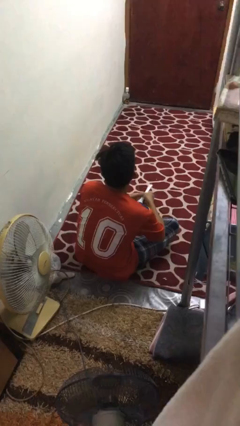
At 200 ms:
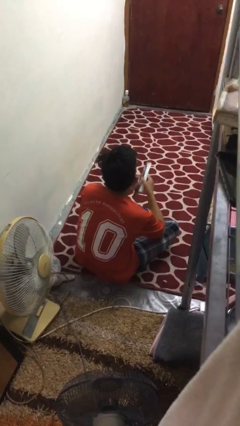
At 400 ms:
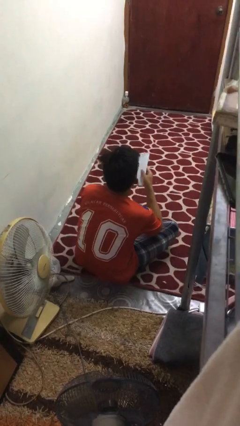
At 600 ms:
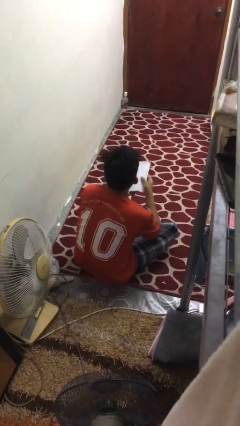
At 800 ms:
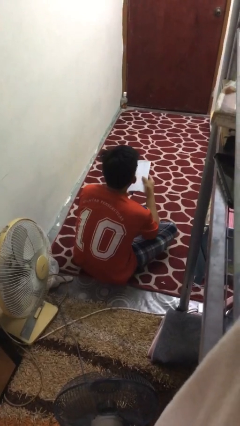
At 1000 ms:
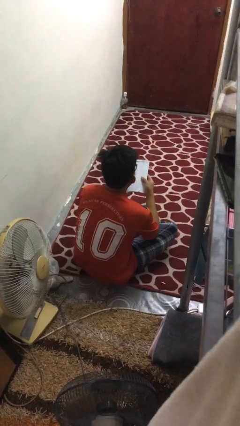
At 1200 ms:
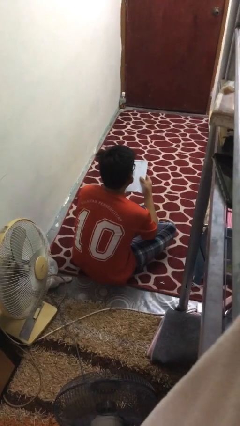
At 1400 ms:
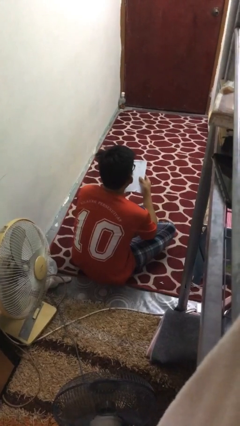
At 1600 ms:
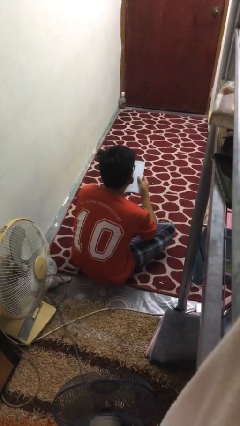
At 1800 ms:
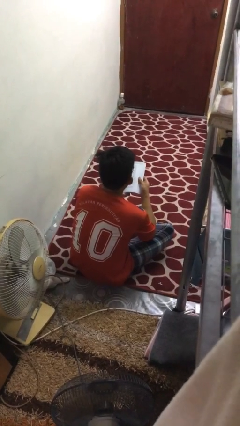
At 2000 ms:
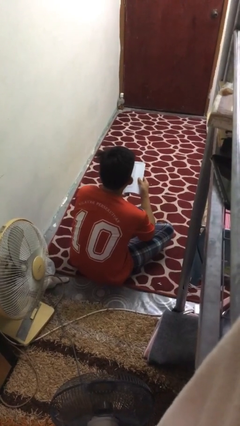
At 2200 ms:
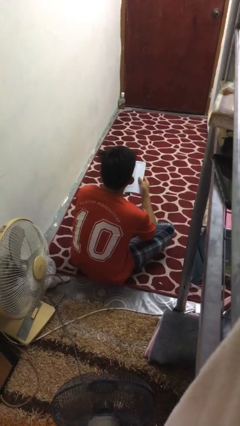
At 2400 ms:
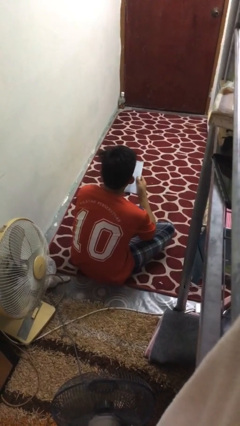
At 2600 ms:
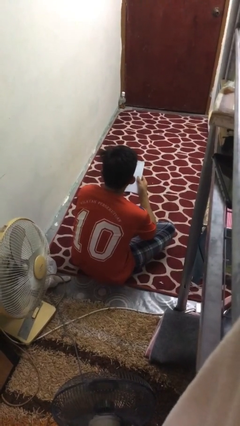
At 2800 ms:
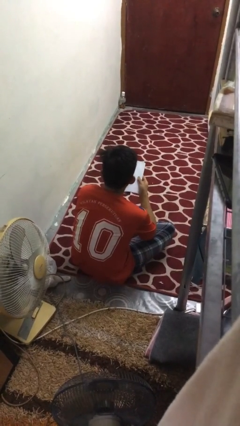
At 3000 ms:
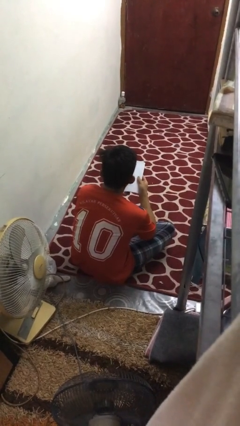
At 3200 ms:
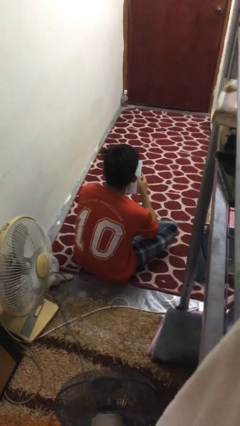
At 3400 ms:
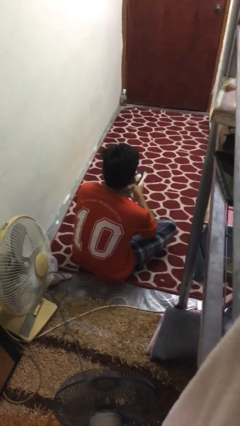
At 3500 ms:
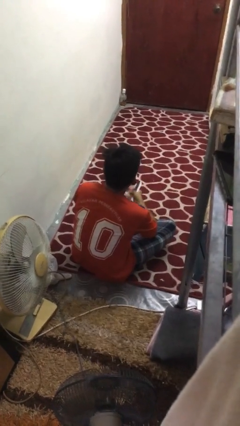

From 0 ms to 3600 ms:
person reads book

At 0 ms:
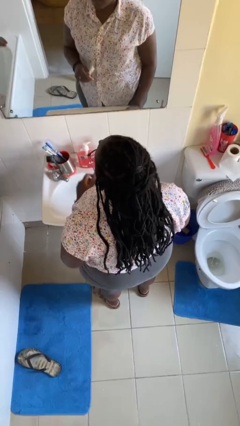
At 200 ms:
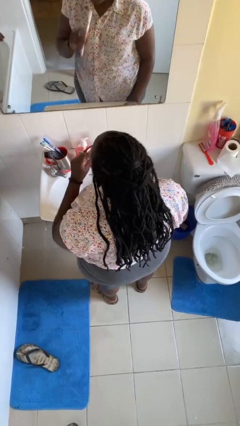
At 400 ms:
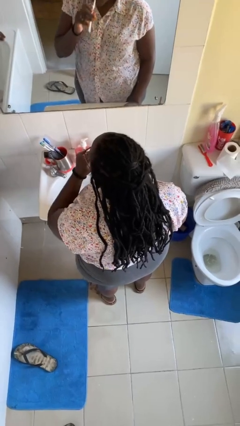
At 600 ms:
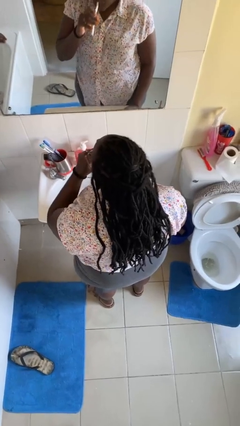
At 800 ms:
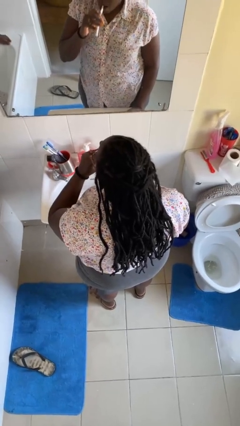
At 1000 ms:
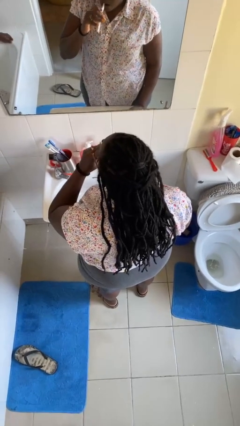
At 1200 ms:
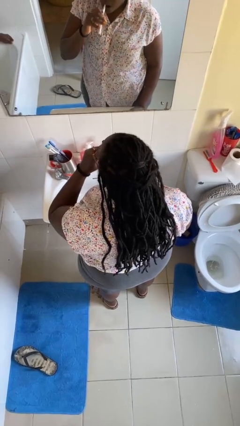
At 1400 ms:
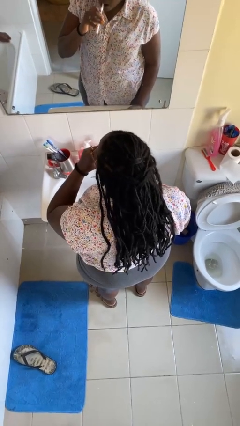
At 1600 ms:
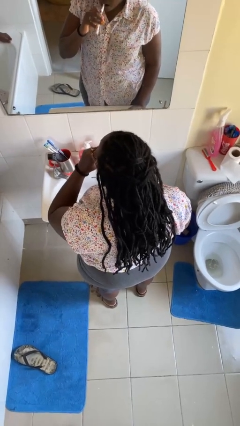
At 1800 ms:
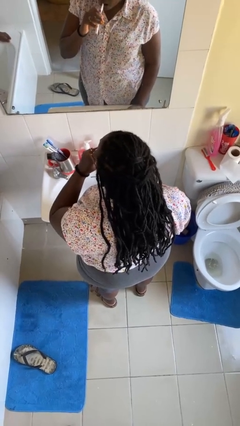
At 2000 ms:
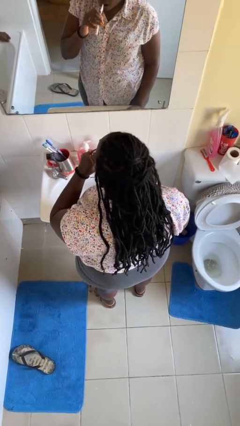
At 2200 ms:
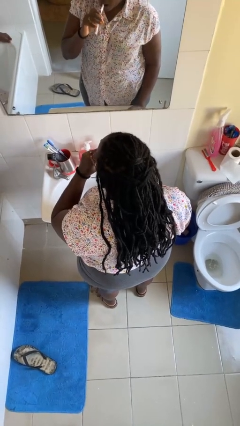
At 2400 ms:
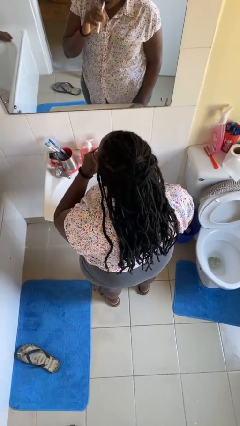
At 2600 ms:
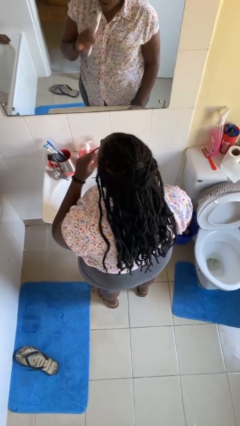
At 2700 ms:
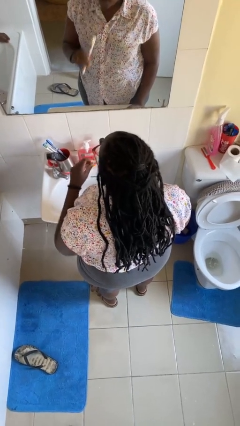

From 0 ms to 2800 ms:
person brushes teeth

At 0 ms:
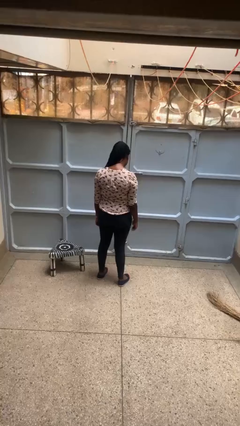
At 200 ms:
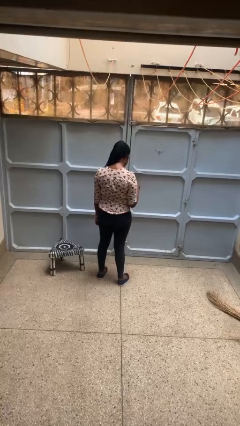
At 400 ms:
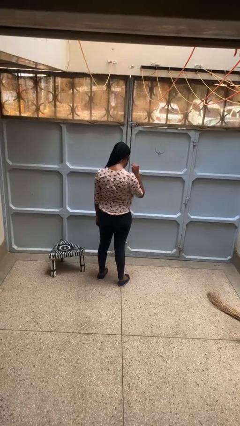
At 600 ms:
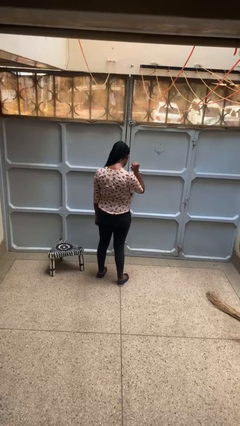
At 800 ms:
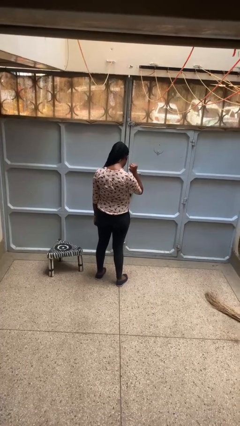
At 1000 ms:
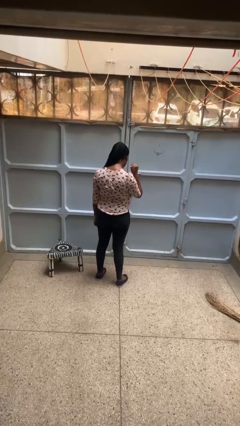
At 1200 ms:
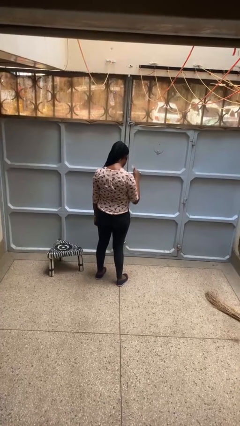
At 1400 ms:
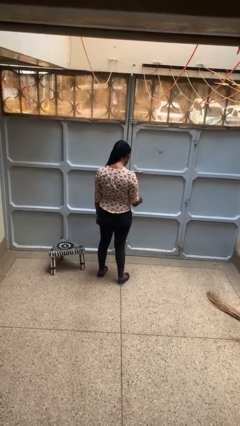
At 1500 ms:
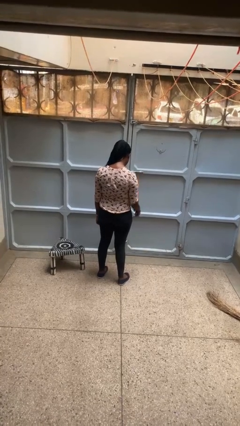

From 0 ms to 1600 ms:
person gestures behind me

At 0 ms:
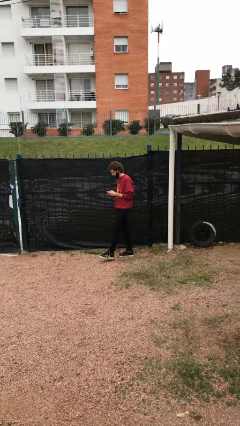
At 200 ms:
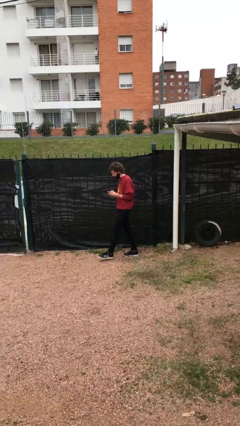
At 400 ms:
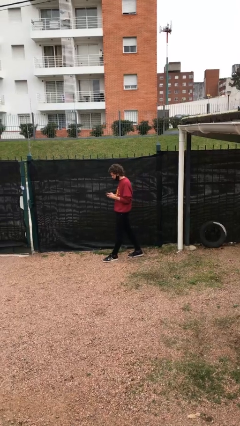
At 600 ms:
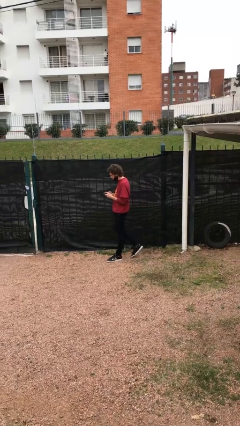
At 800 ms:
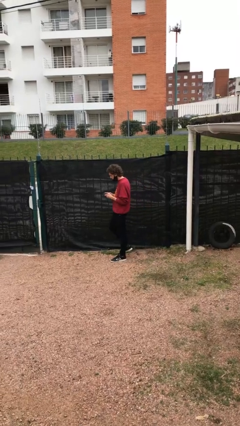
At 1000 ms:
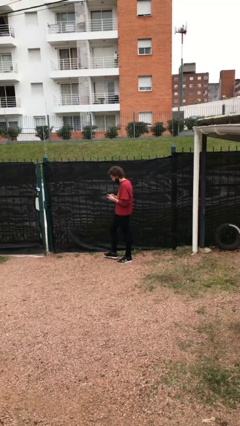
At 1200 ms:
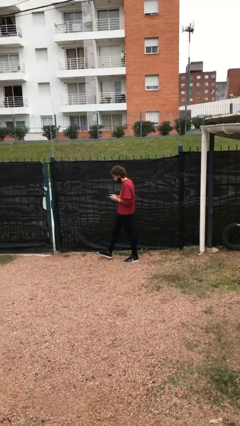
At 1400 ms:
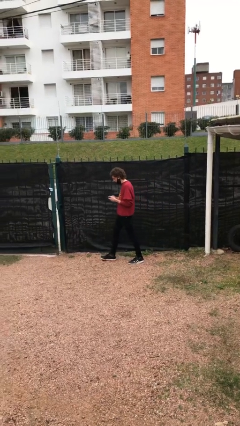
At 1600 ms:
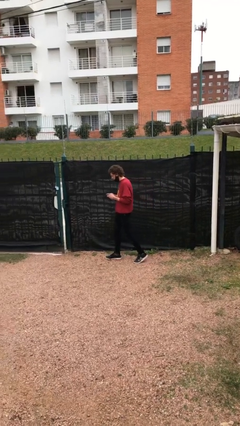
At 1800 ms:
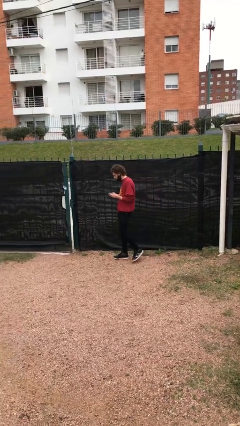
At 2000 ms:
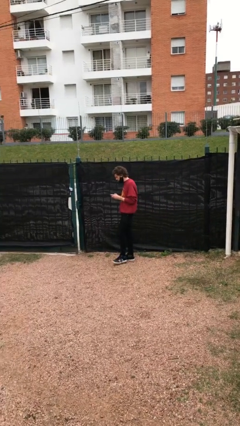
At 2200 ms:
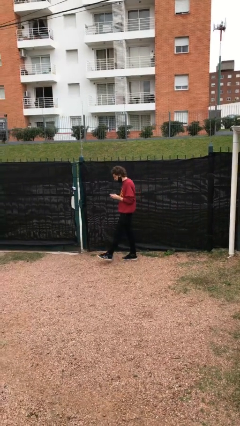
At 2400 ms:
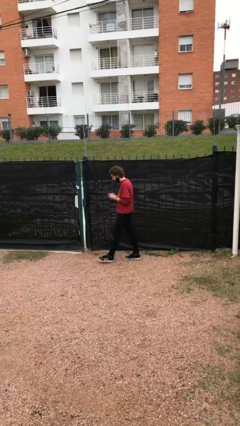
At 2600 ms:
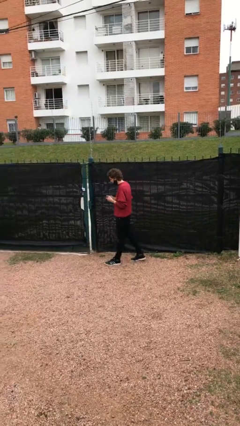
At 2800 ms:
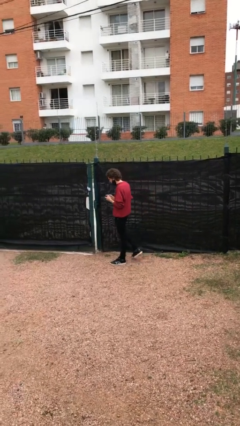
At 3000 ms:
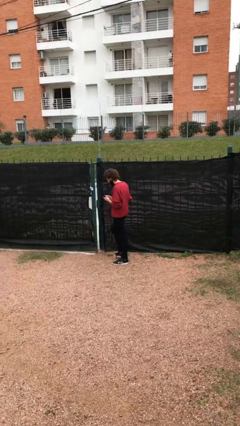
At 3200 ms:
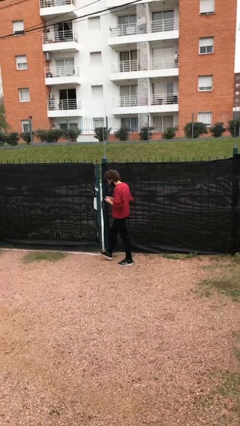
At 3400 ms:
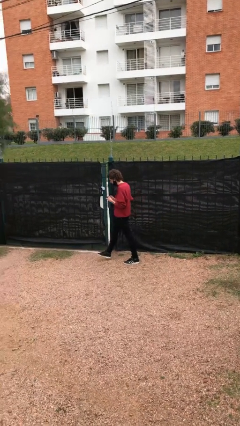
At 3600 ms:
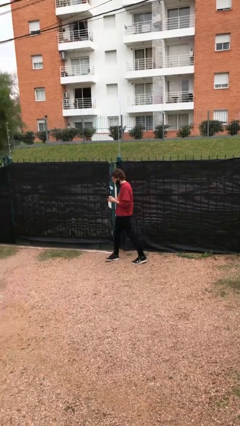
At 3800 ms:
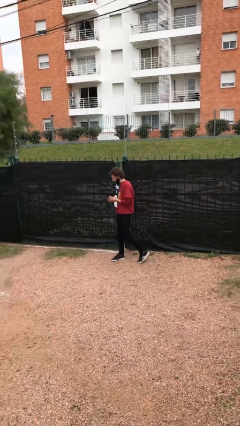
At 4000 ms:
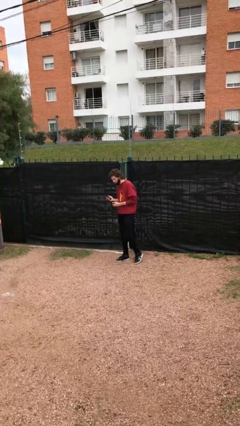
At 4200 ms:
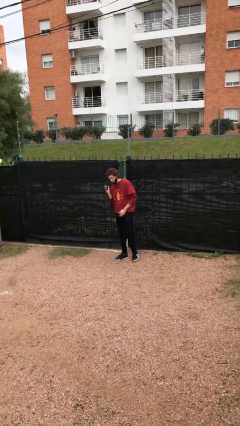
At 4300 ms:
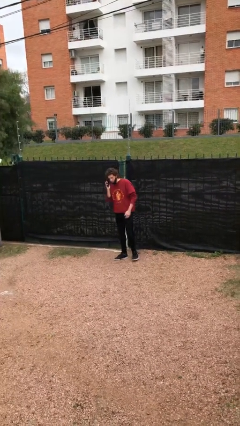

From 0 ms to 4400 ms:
person texts on phone

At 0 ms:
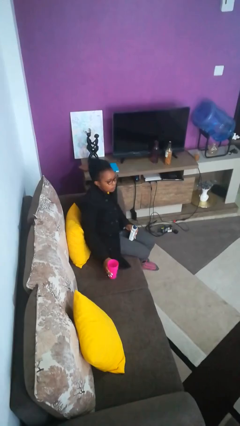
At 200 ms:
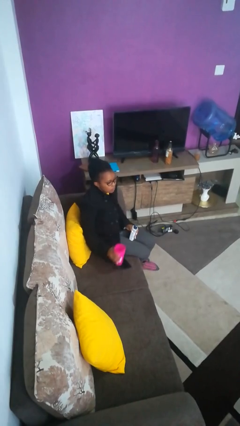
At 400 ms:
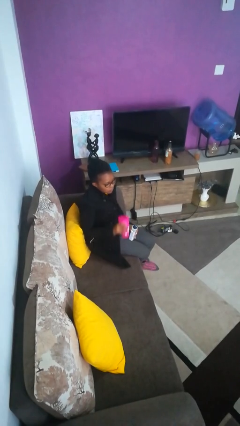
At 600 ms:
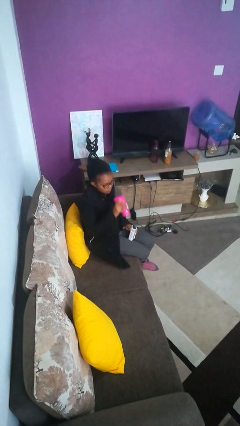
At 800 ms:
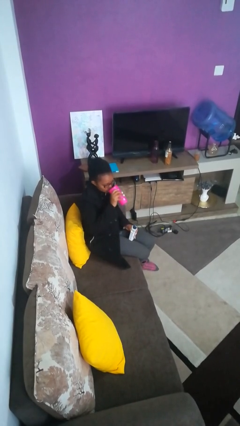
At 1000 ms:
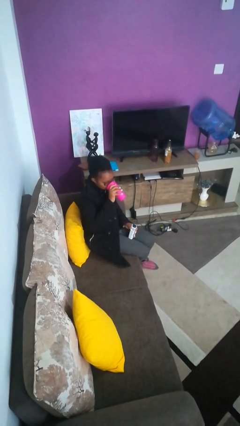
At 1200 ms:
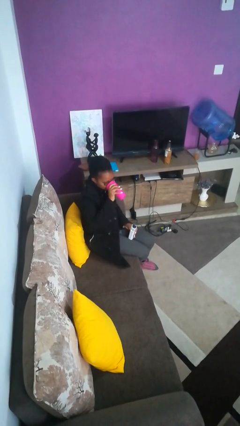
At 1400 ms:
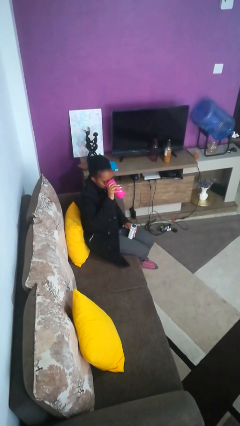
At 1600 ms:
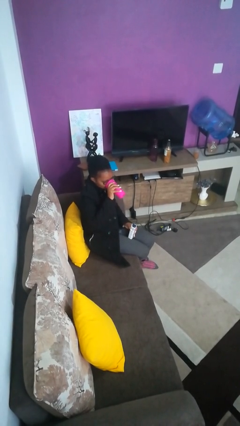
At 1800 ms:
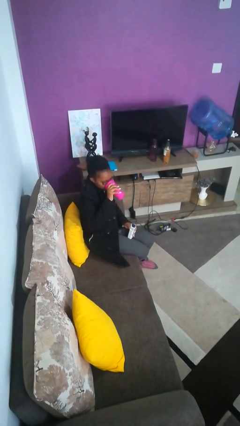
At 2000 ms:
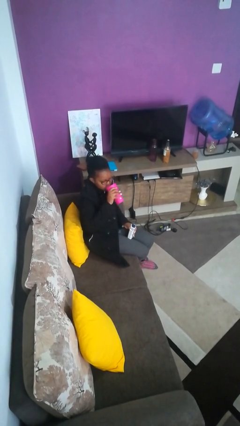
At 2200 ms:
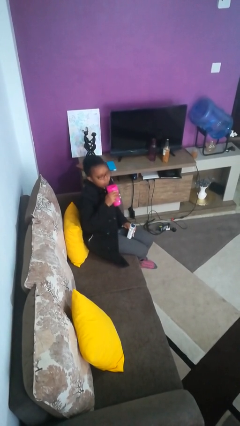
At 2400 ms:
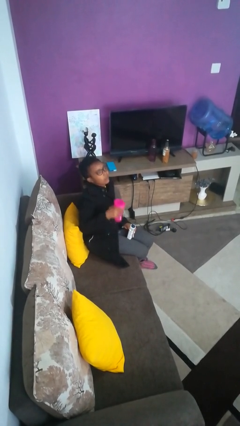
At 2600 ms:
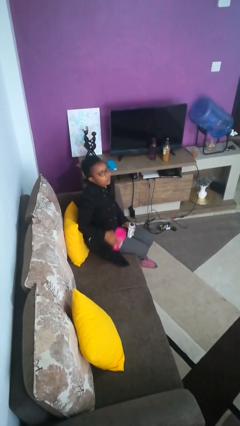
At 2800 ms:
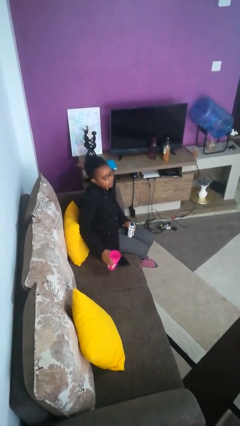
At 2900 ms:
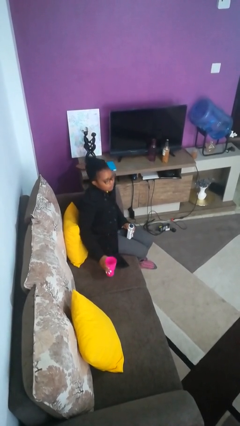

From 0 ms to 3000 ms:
person drinks from cup

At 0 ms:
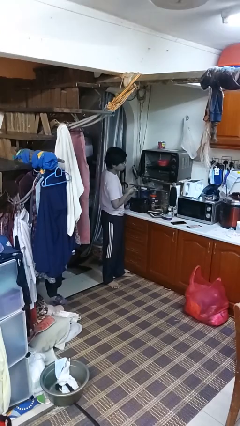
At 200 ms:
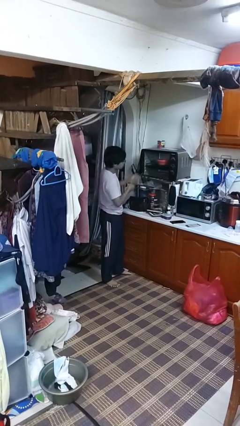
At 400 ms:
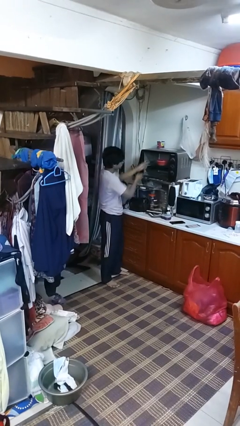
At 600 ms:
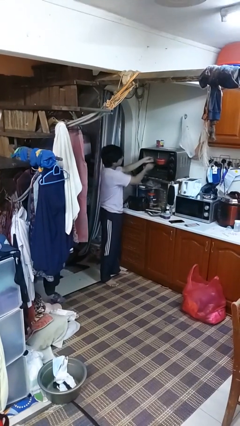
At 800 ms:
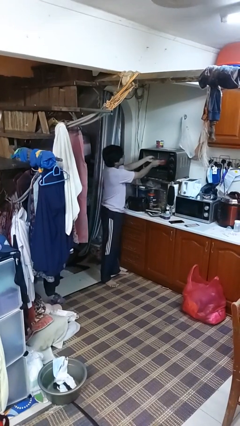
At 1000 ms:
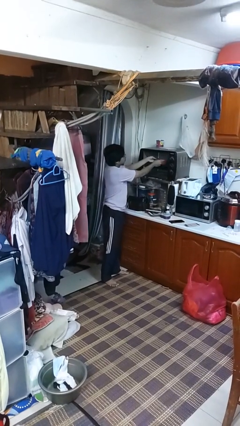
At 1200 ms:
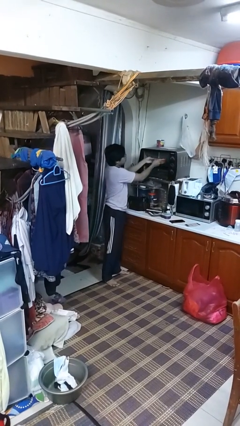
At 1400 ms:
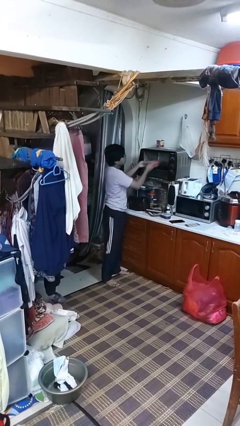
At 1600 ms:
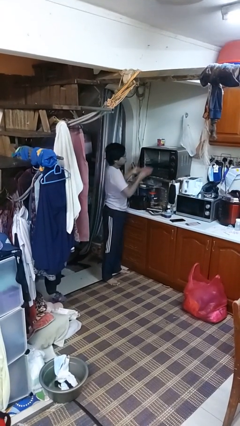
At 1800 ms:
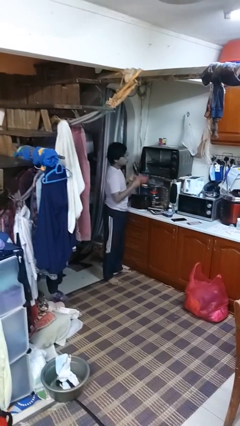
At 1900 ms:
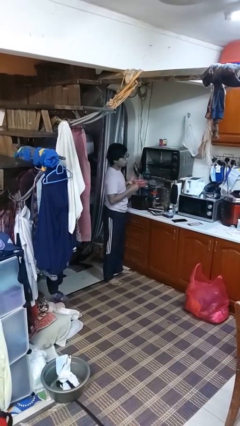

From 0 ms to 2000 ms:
person takes object from oven
